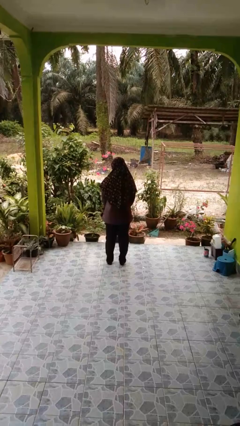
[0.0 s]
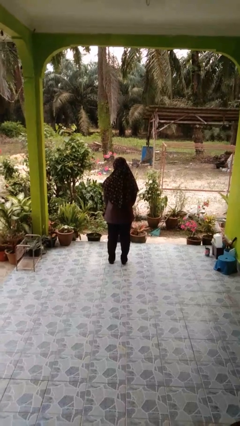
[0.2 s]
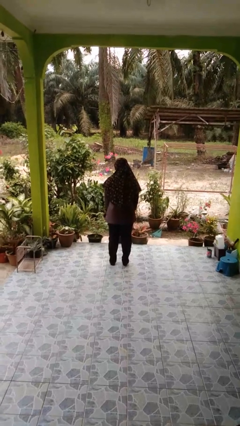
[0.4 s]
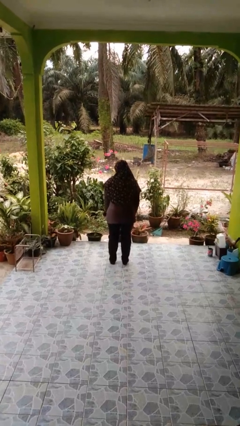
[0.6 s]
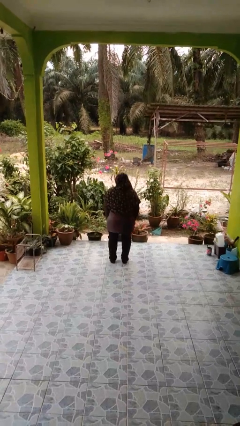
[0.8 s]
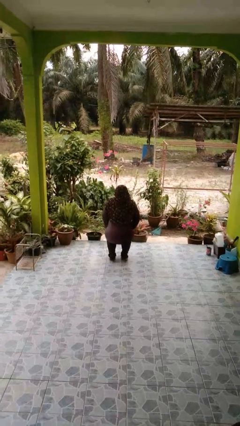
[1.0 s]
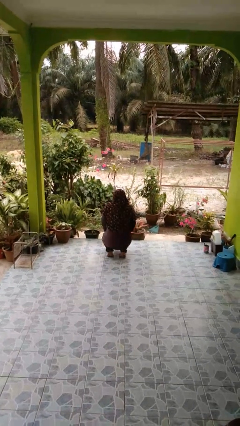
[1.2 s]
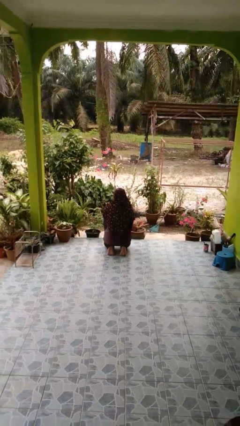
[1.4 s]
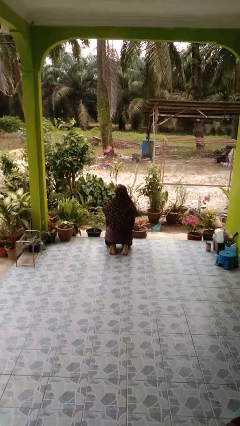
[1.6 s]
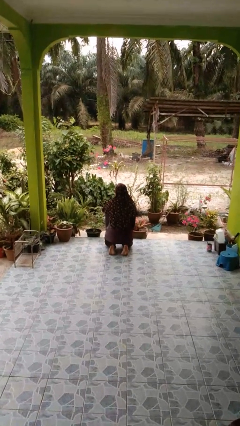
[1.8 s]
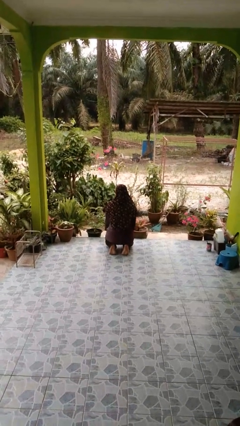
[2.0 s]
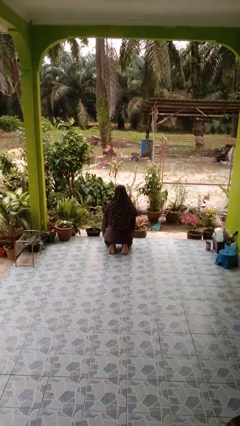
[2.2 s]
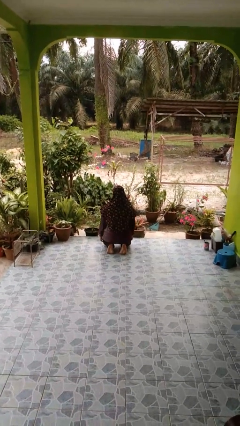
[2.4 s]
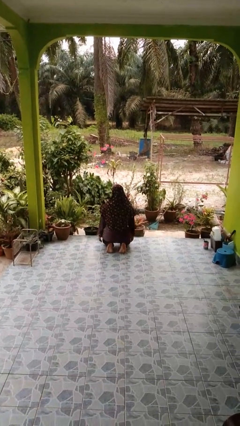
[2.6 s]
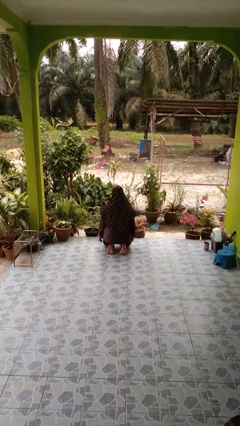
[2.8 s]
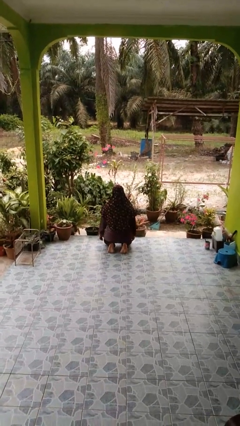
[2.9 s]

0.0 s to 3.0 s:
person kneels

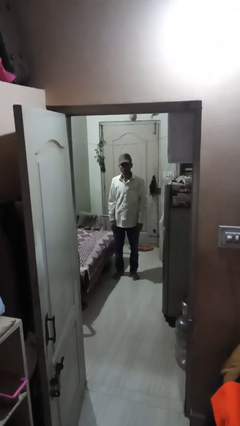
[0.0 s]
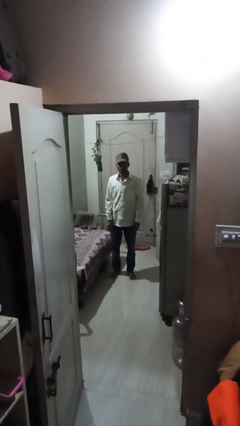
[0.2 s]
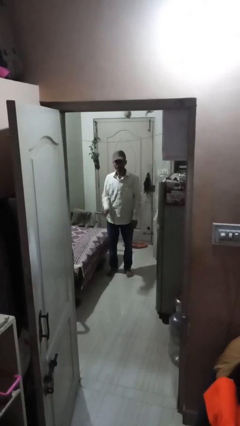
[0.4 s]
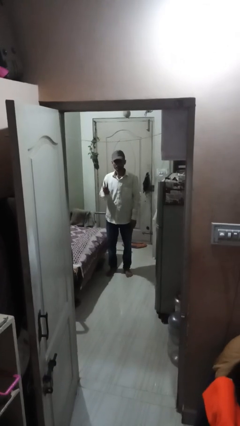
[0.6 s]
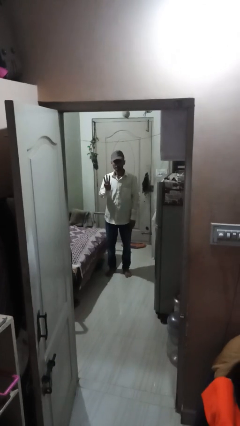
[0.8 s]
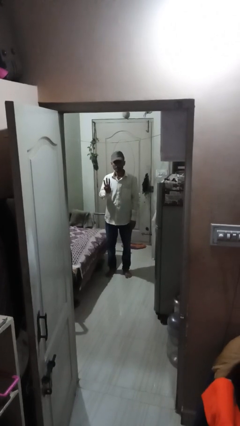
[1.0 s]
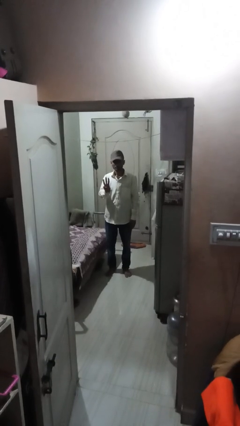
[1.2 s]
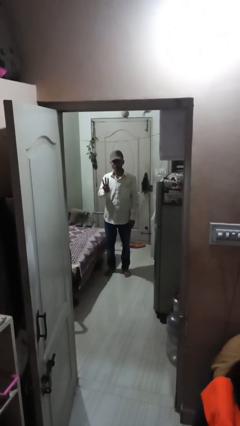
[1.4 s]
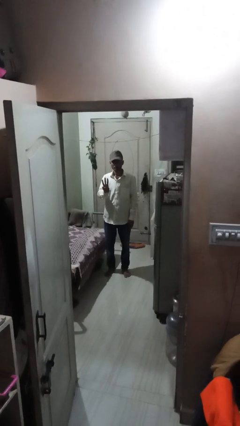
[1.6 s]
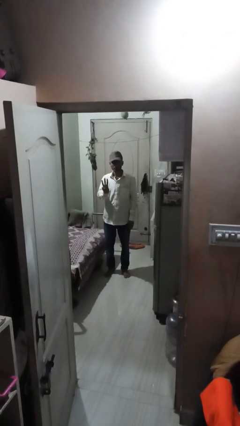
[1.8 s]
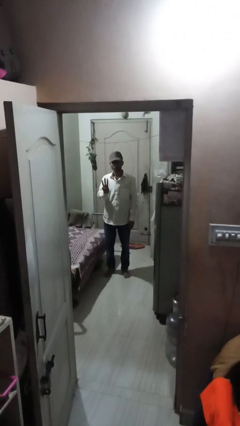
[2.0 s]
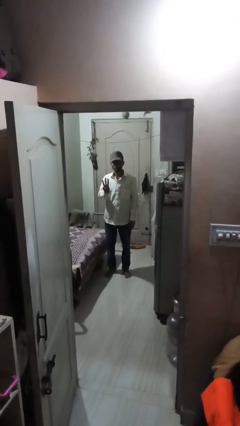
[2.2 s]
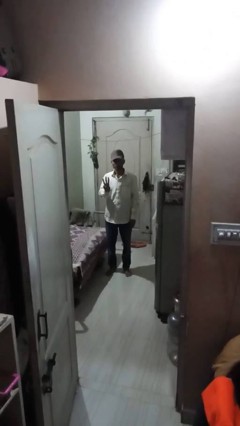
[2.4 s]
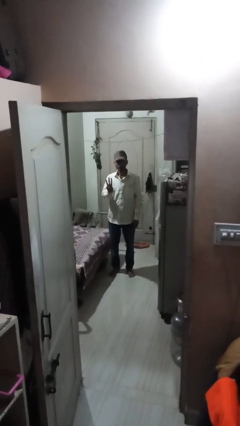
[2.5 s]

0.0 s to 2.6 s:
person gestures number three

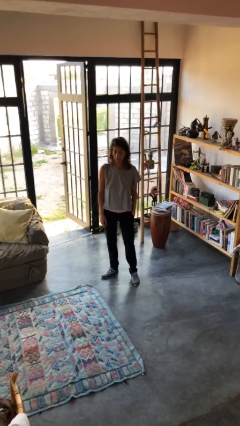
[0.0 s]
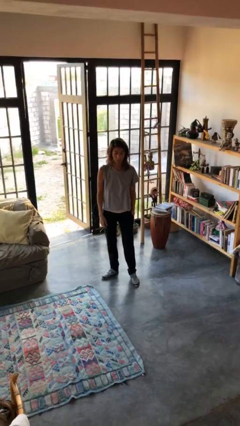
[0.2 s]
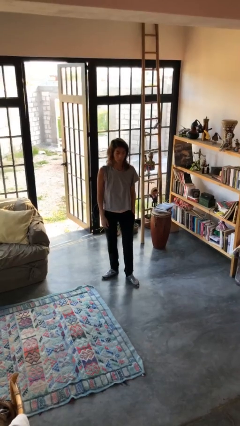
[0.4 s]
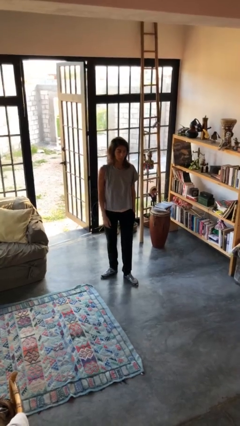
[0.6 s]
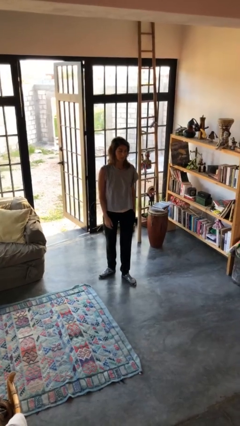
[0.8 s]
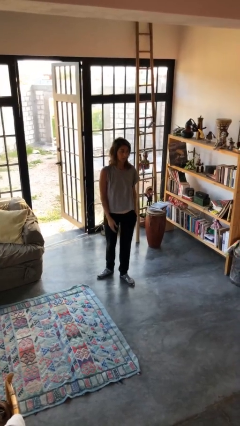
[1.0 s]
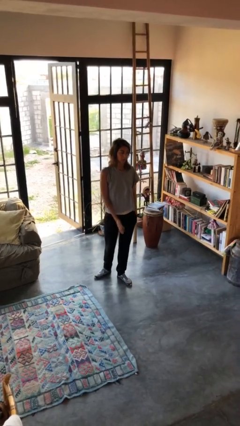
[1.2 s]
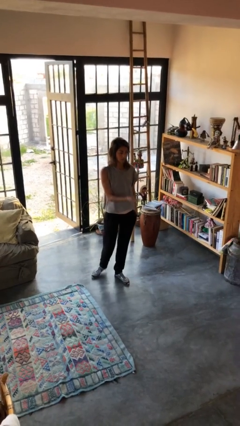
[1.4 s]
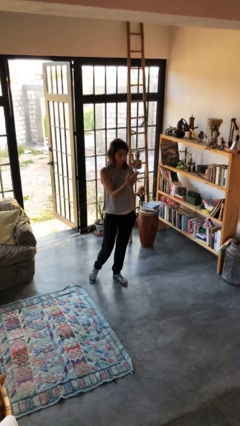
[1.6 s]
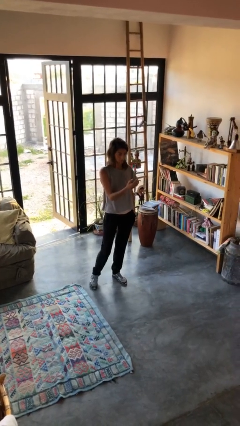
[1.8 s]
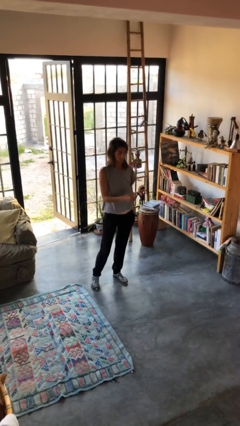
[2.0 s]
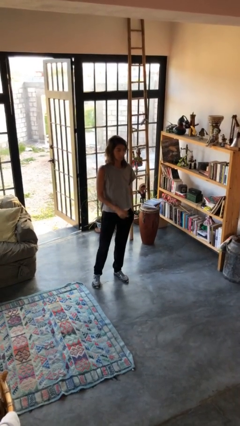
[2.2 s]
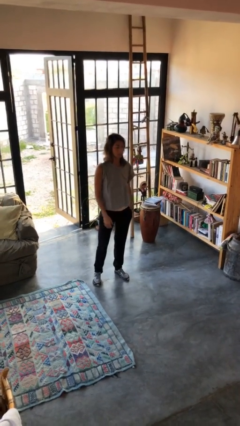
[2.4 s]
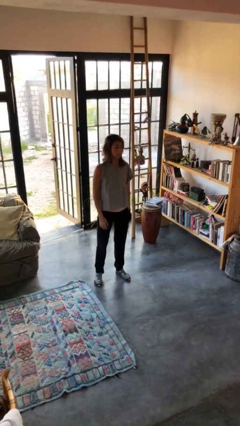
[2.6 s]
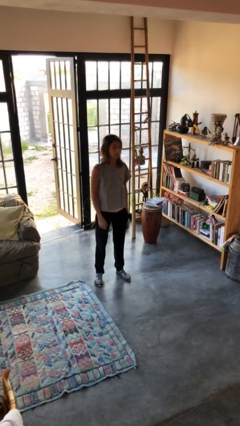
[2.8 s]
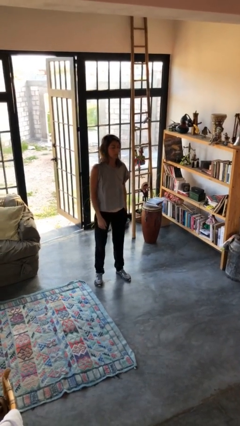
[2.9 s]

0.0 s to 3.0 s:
person gestures swipe up

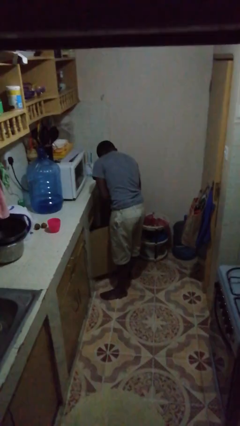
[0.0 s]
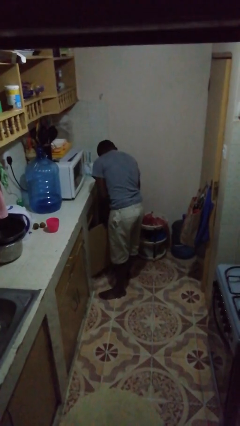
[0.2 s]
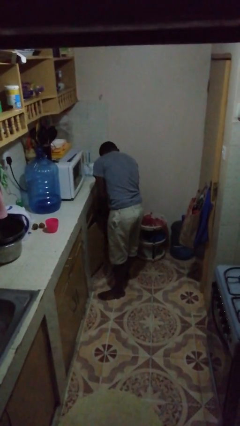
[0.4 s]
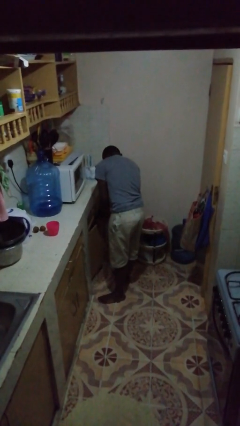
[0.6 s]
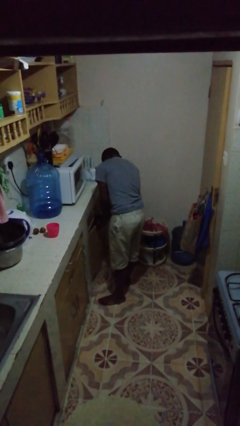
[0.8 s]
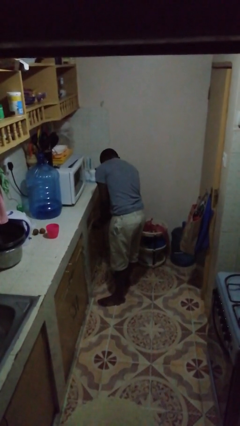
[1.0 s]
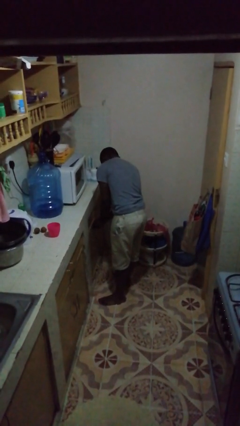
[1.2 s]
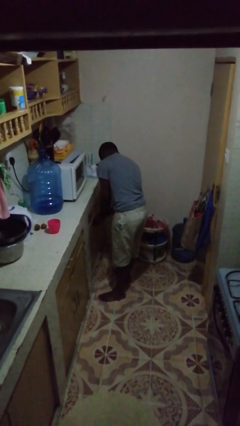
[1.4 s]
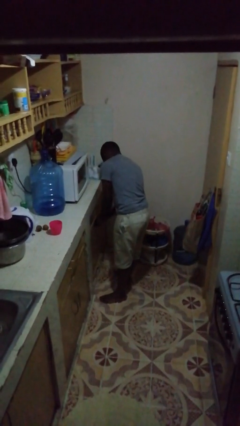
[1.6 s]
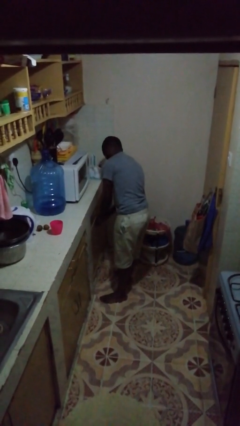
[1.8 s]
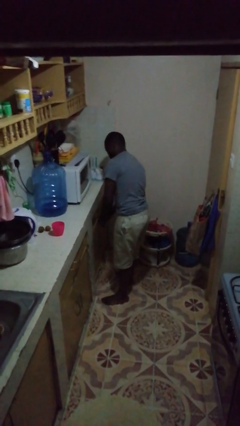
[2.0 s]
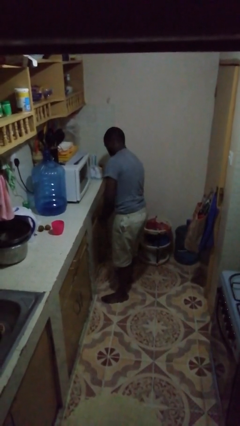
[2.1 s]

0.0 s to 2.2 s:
person closes cabinet

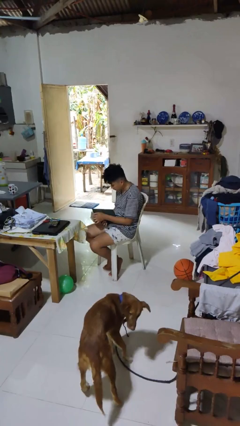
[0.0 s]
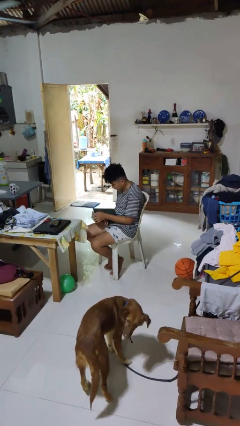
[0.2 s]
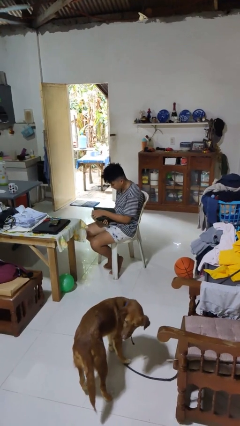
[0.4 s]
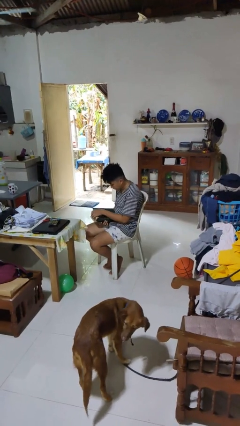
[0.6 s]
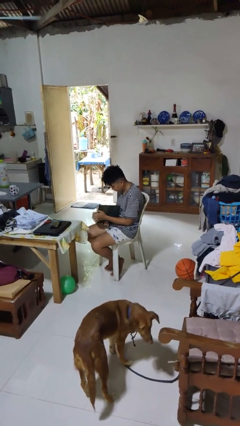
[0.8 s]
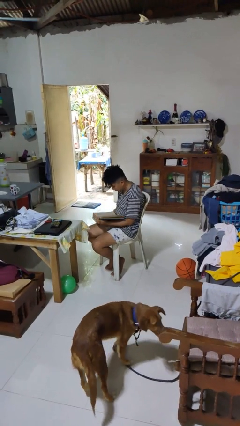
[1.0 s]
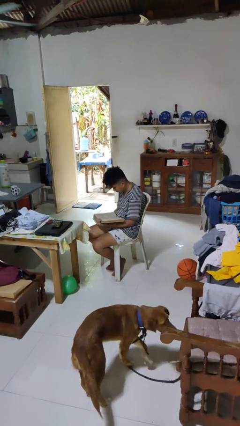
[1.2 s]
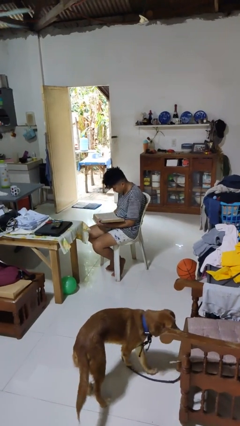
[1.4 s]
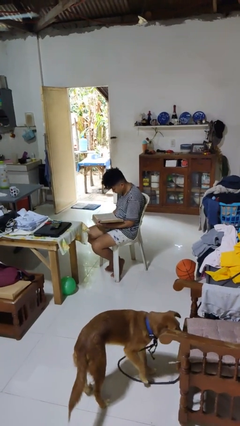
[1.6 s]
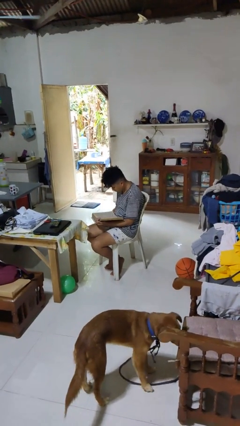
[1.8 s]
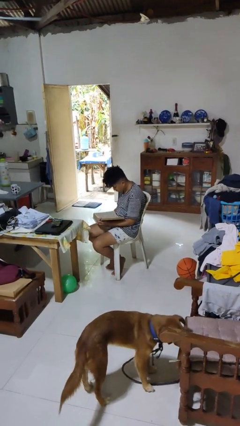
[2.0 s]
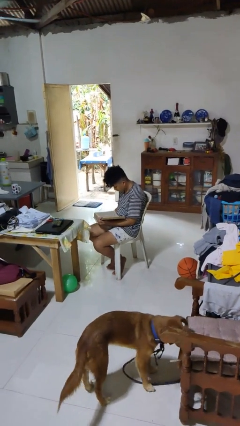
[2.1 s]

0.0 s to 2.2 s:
person reads book

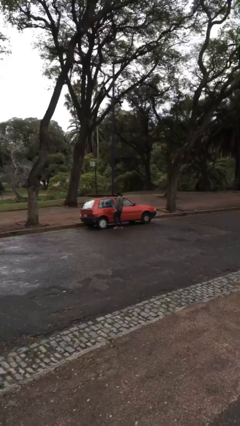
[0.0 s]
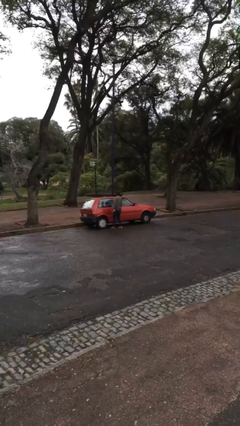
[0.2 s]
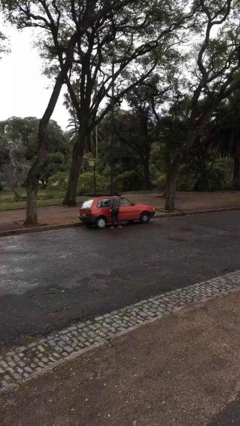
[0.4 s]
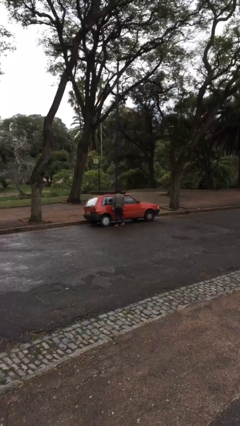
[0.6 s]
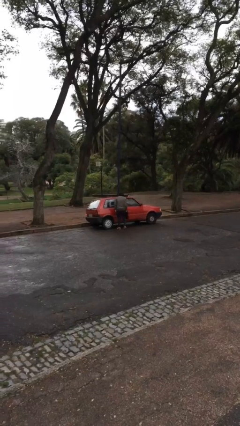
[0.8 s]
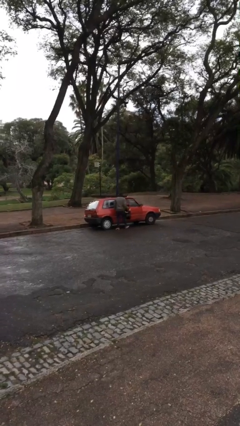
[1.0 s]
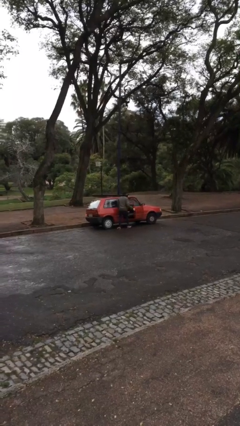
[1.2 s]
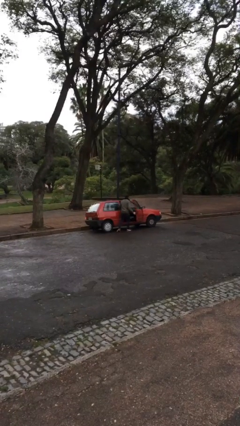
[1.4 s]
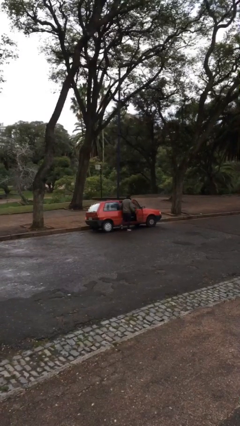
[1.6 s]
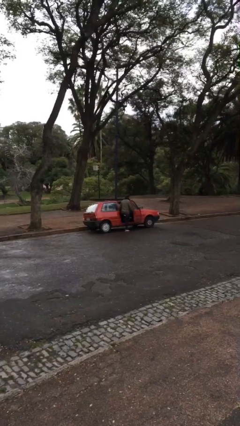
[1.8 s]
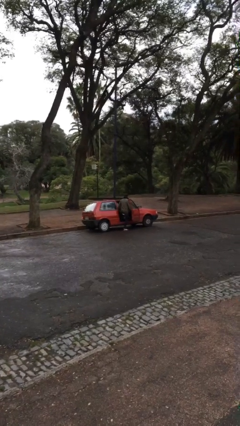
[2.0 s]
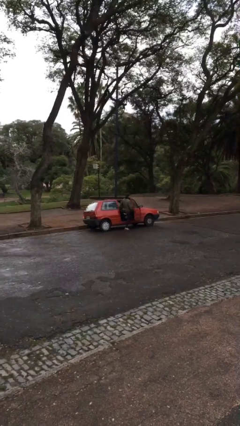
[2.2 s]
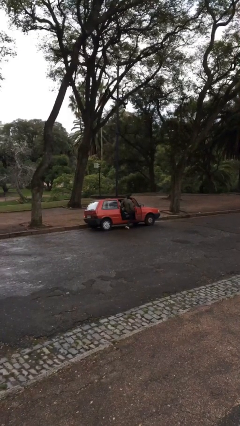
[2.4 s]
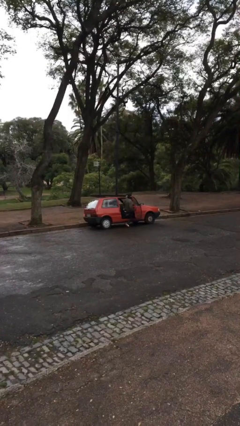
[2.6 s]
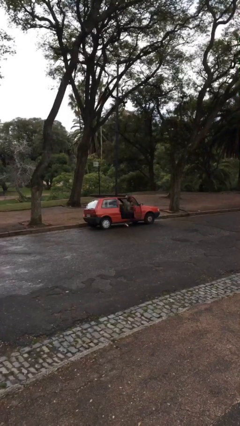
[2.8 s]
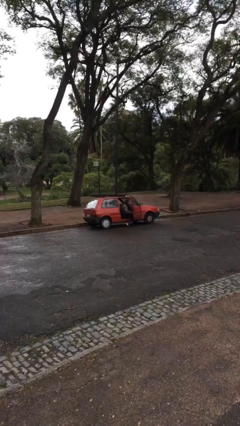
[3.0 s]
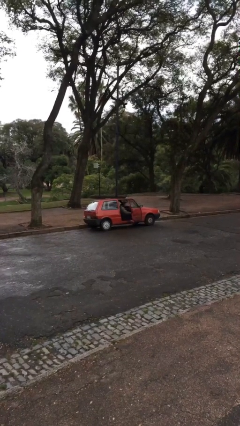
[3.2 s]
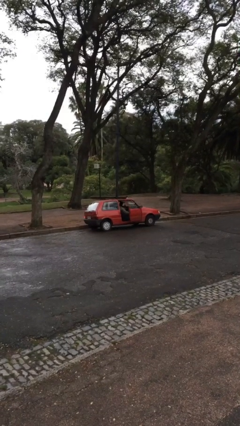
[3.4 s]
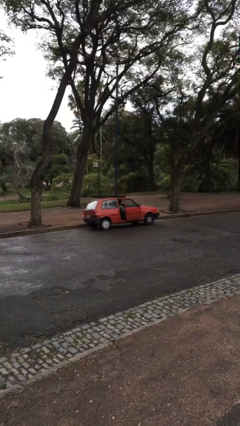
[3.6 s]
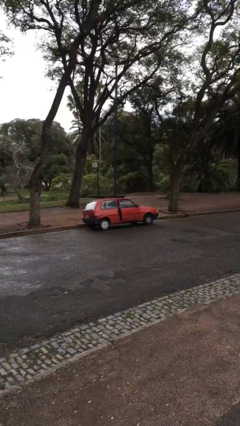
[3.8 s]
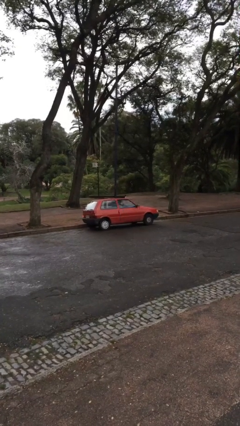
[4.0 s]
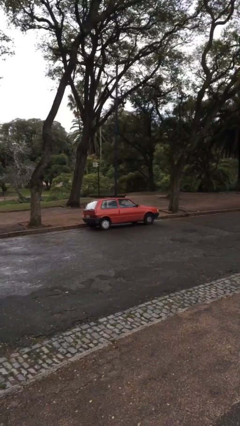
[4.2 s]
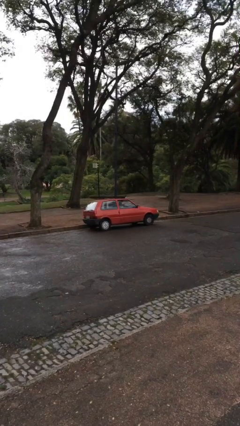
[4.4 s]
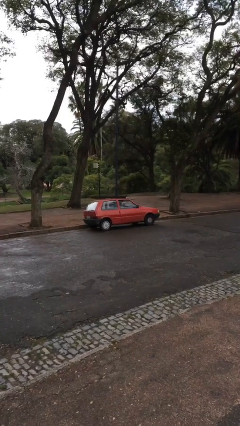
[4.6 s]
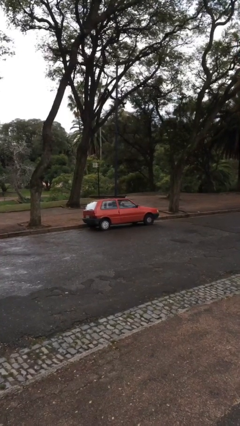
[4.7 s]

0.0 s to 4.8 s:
car picks up person
